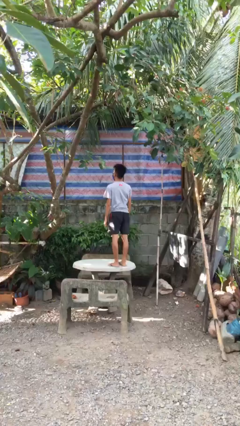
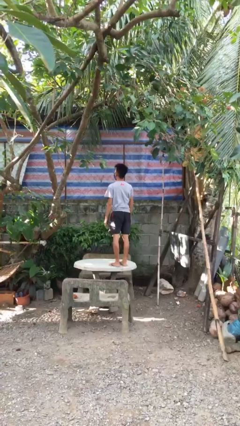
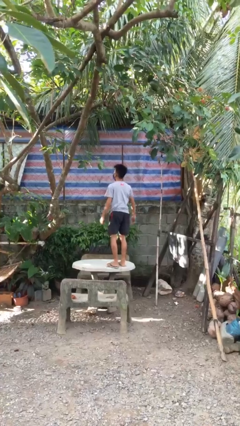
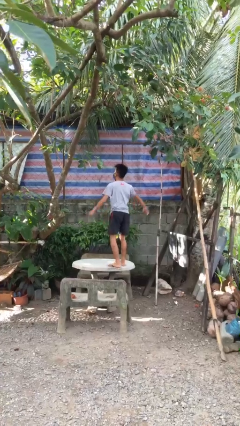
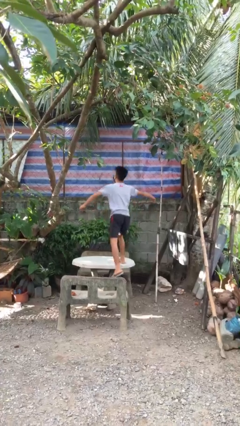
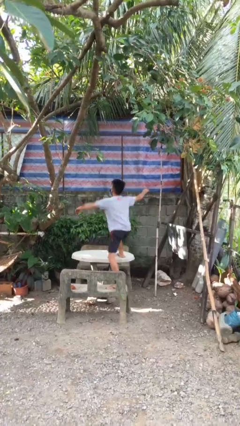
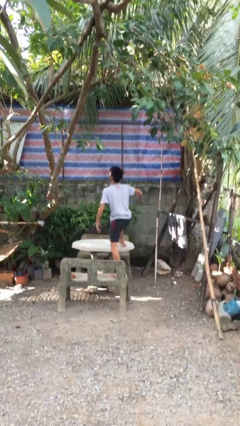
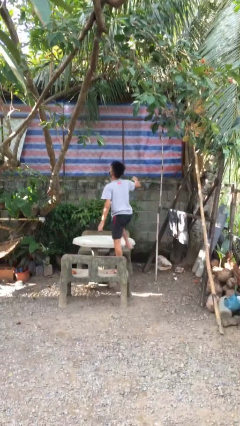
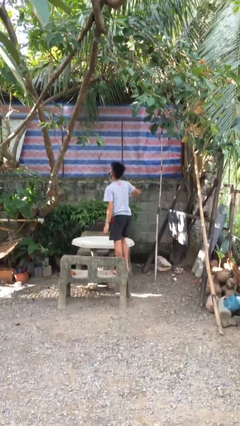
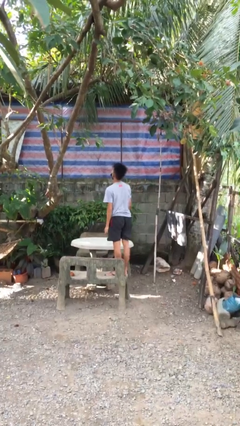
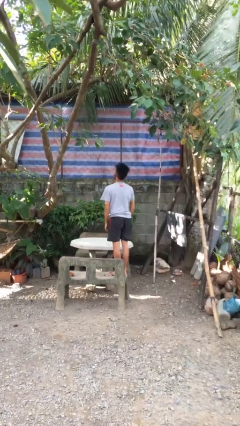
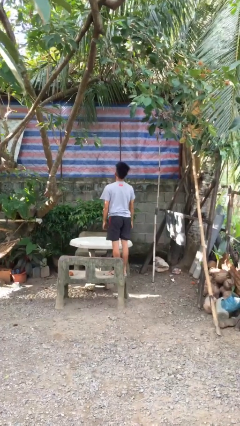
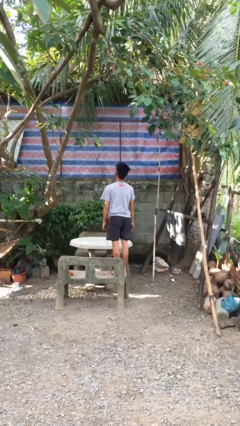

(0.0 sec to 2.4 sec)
person climbs off table

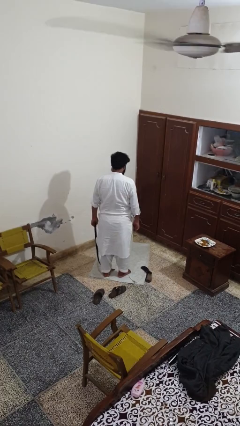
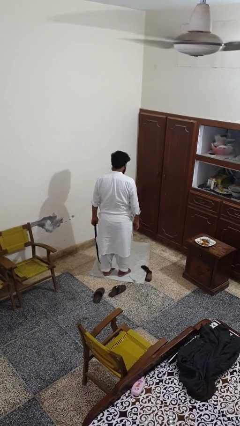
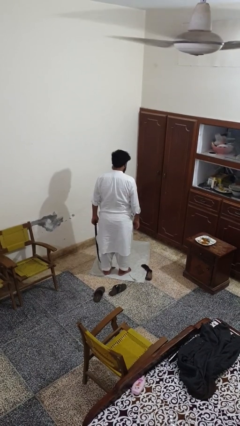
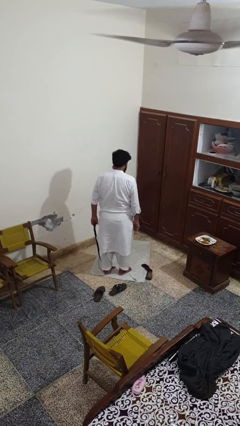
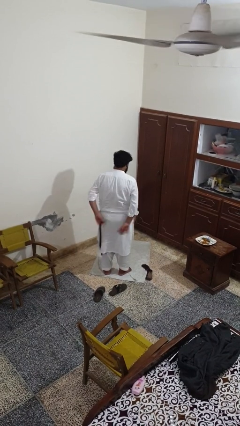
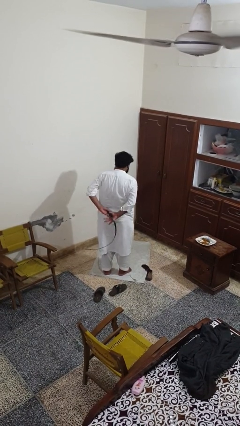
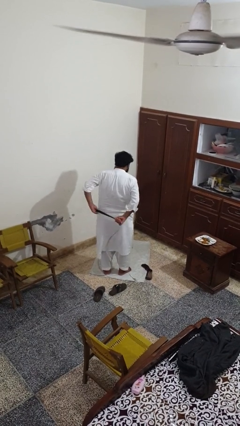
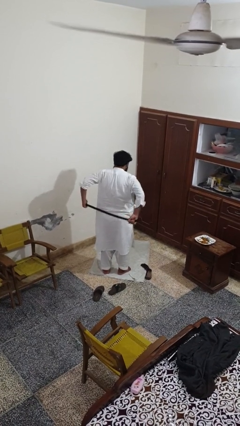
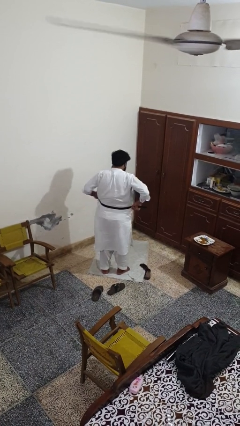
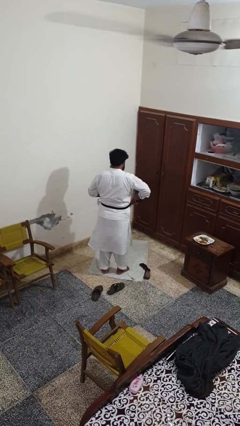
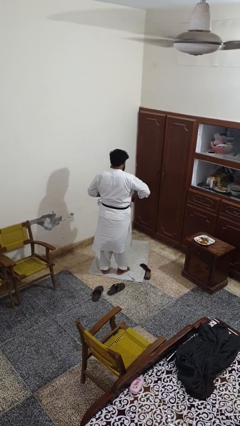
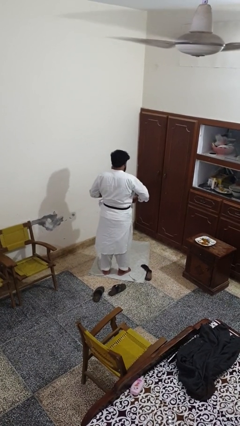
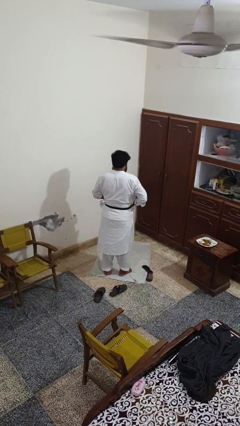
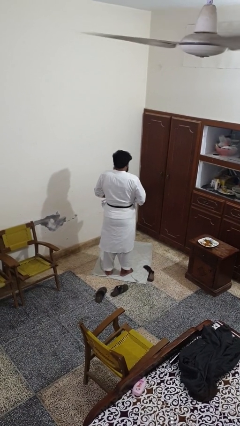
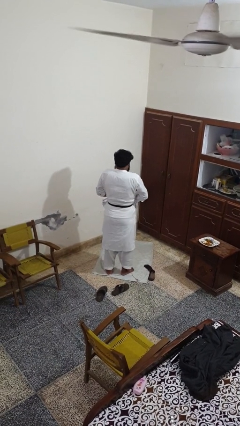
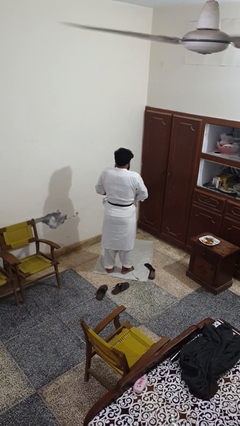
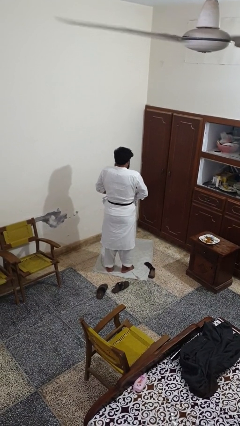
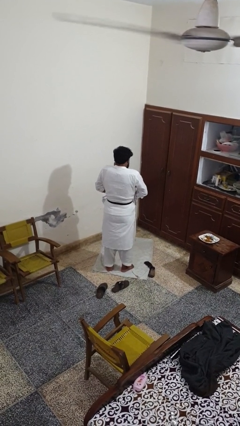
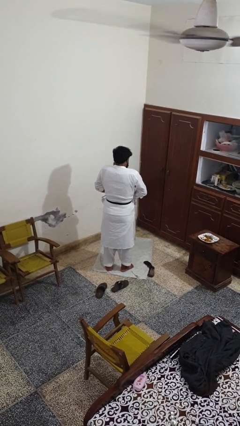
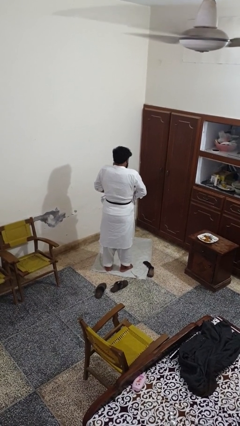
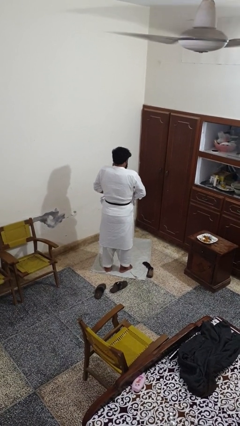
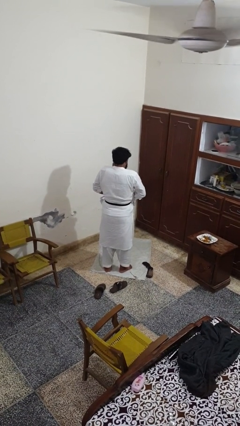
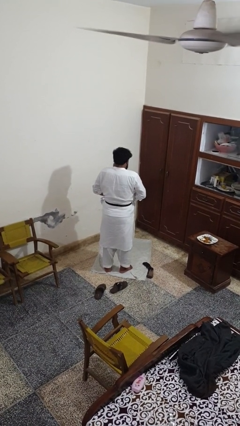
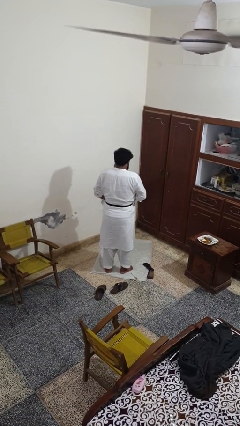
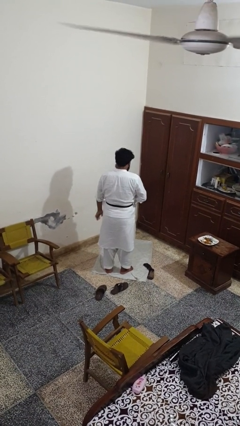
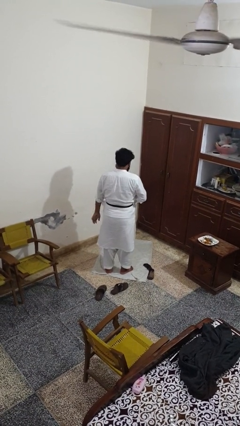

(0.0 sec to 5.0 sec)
person puts on belt

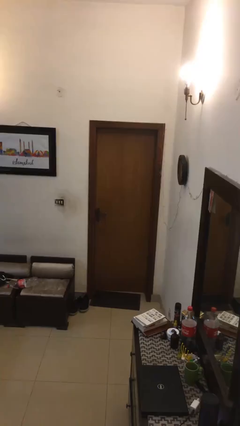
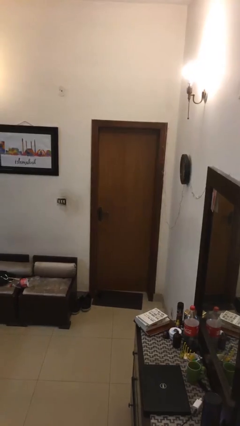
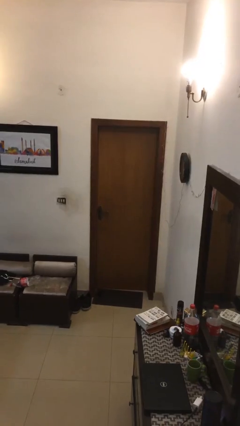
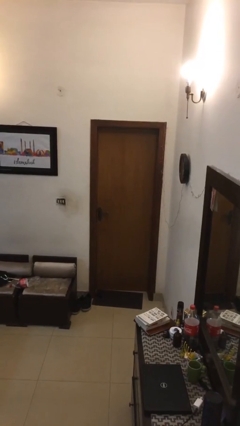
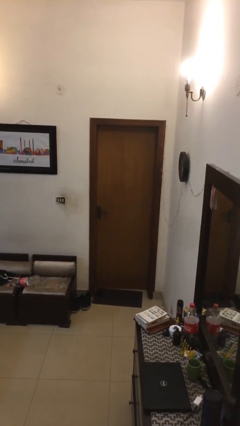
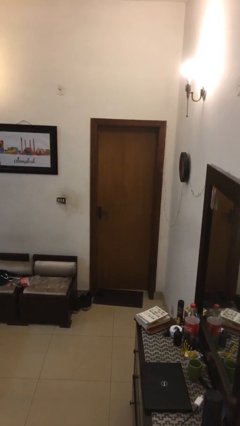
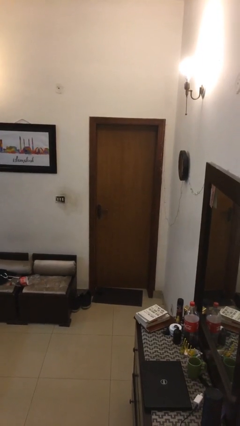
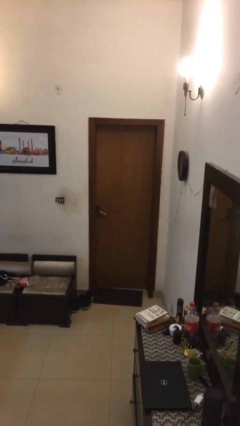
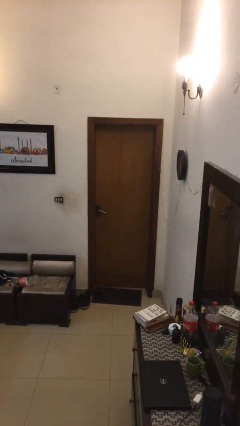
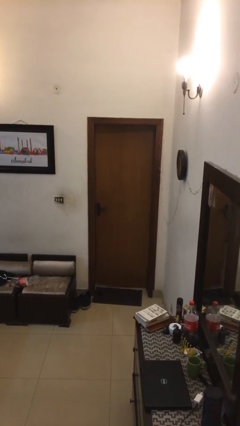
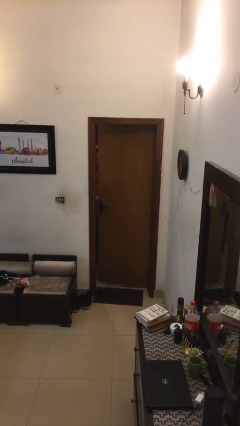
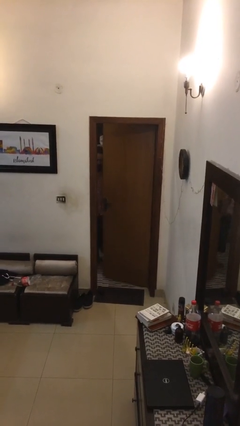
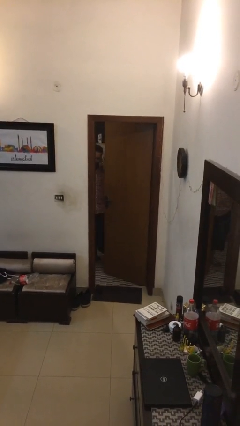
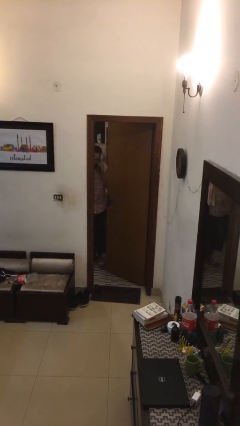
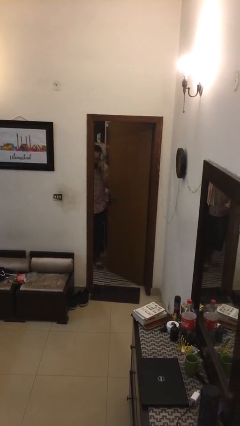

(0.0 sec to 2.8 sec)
person opens facility door

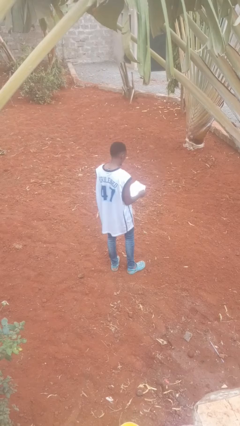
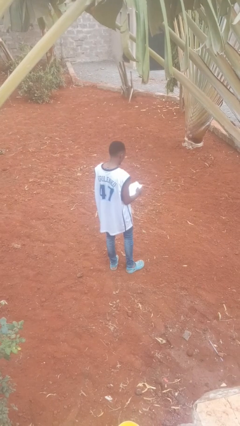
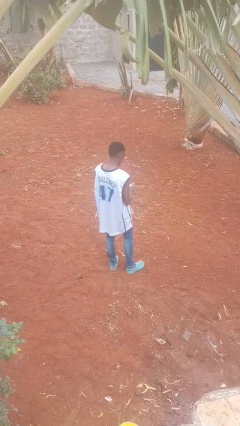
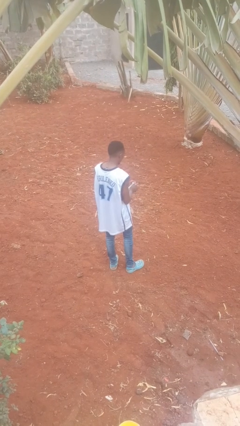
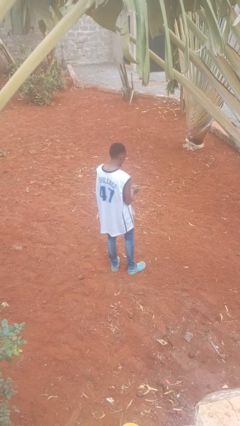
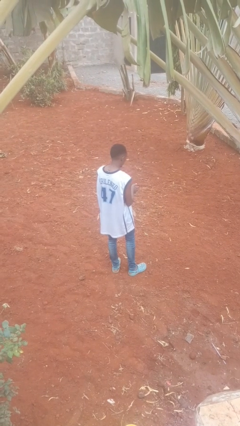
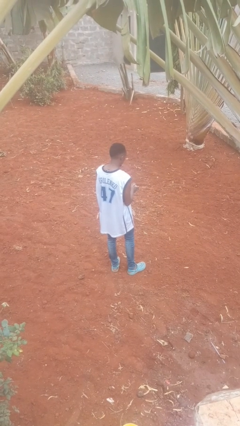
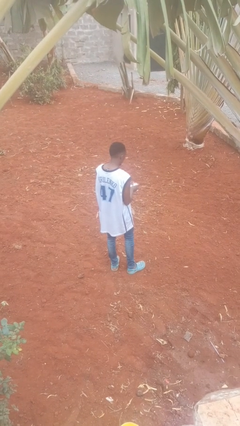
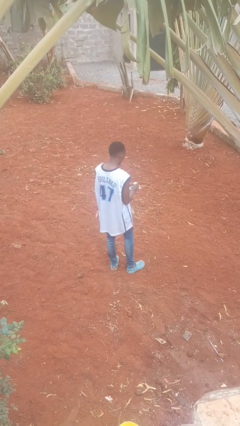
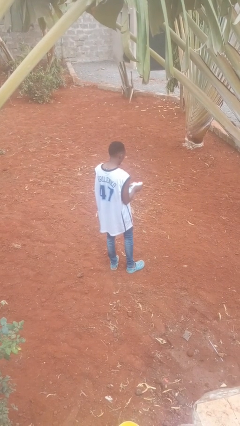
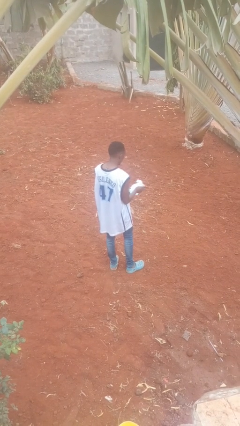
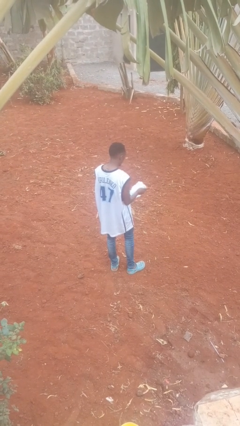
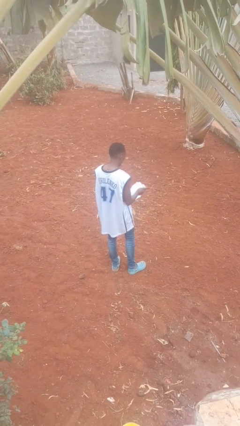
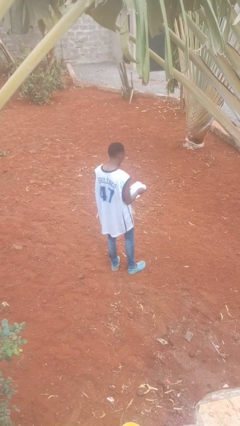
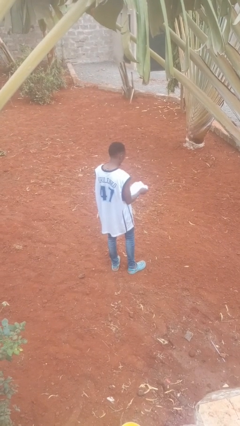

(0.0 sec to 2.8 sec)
person crumples paper

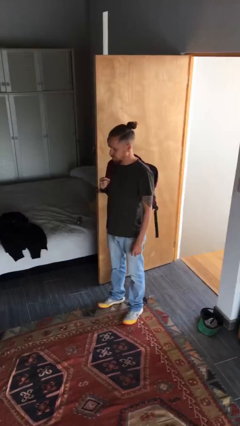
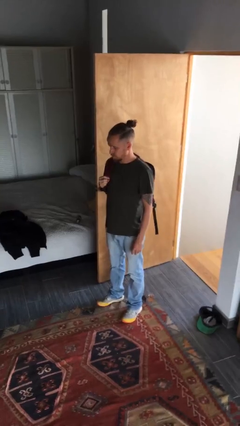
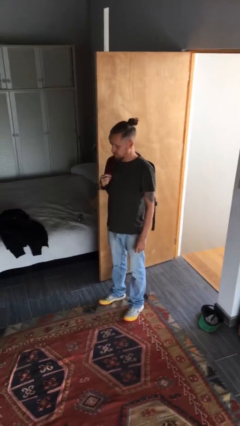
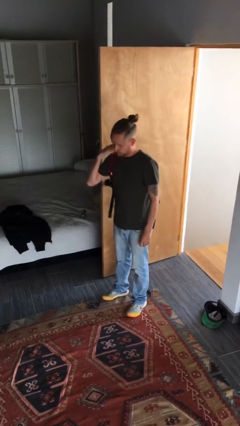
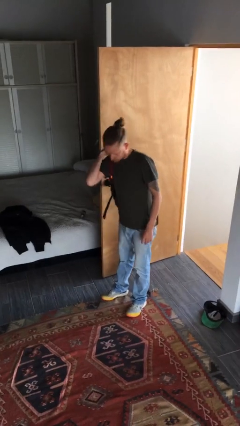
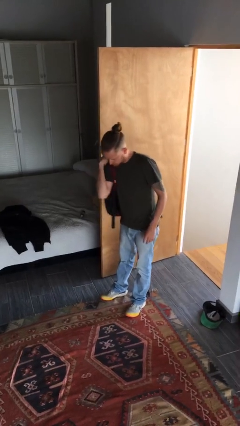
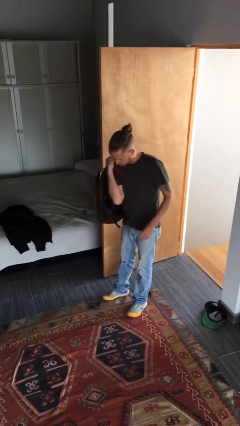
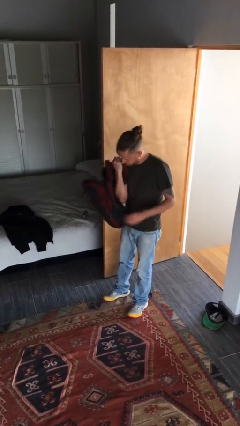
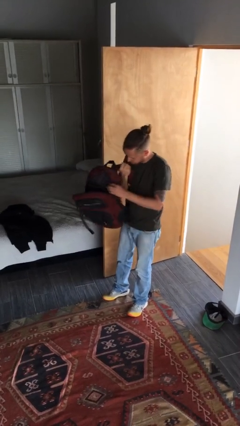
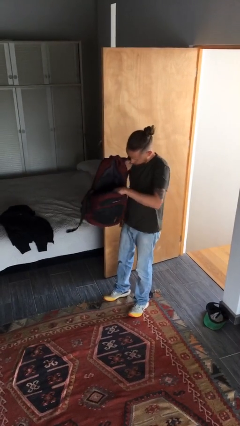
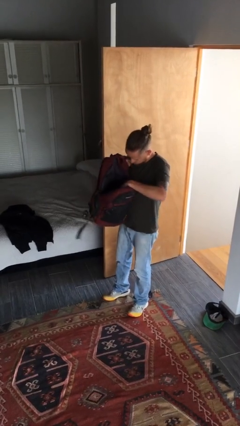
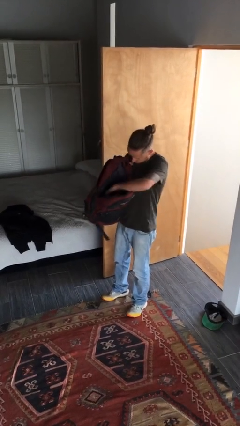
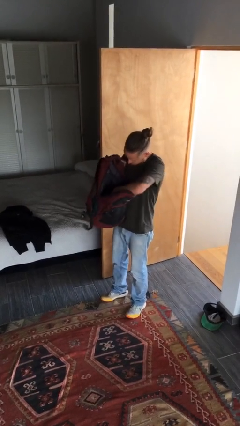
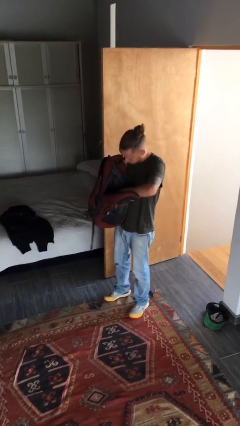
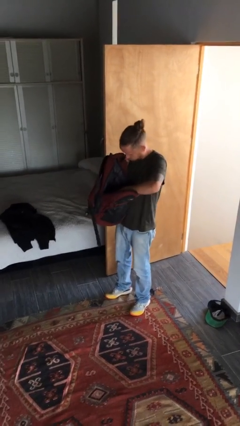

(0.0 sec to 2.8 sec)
person searches in backpack

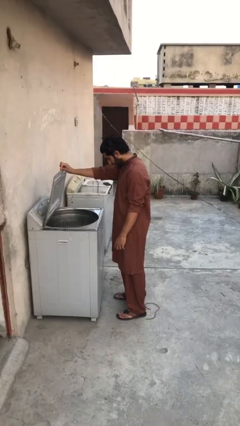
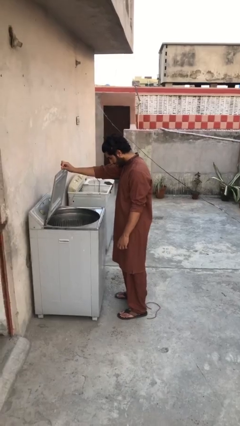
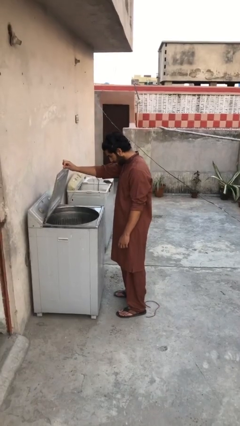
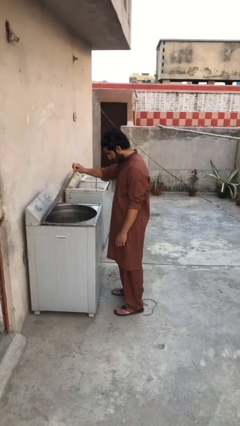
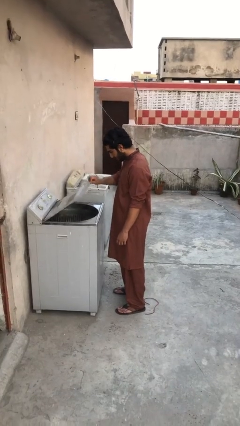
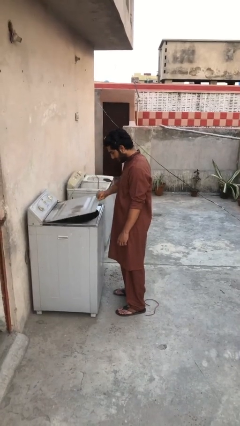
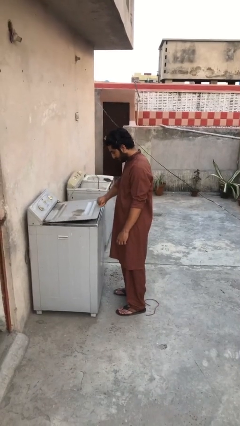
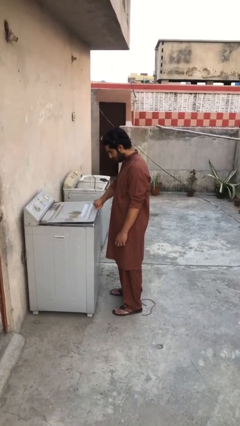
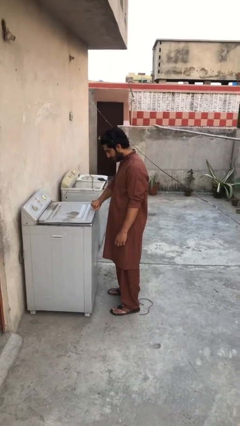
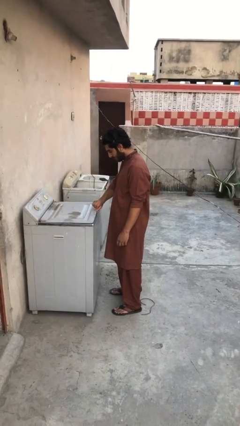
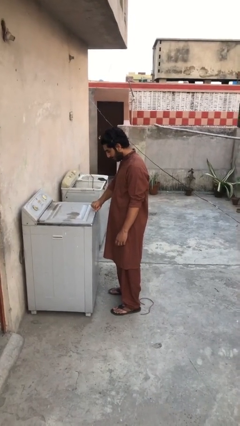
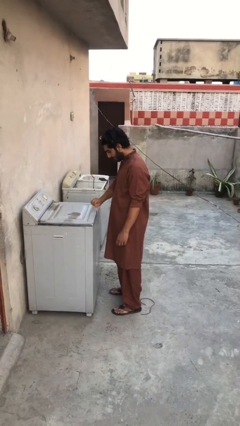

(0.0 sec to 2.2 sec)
person closes clothes washer
